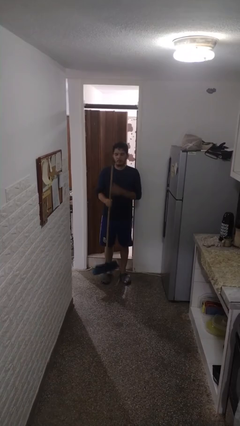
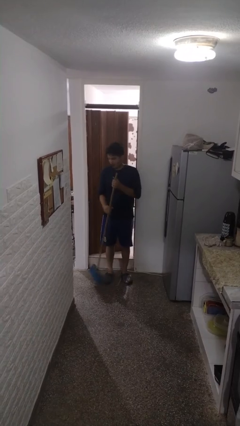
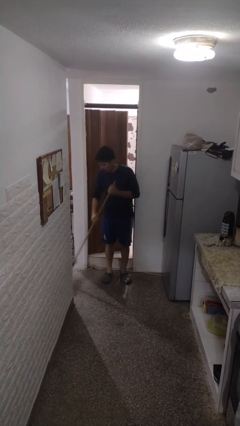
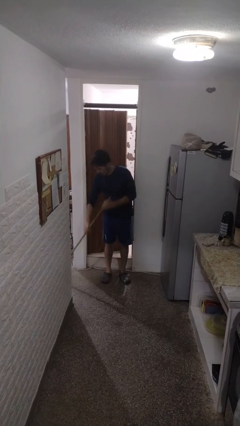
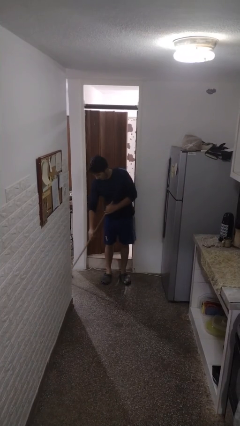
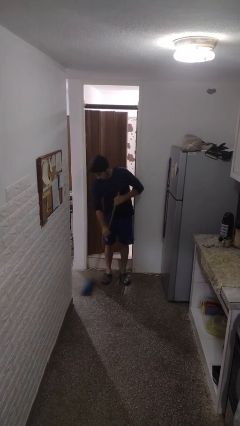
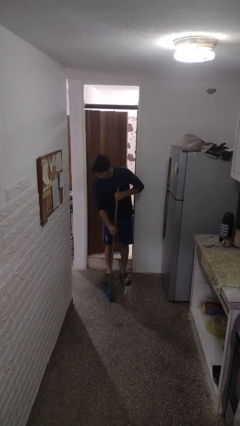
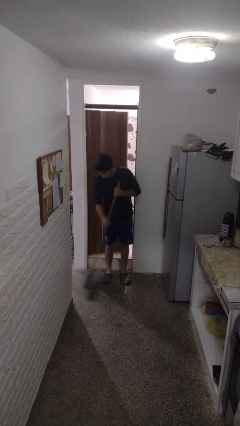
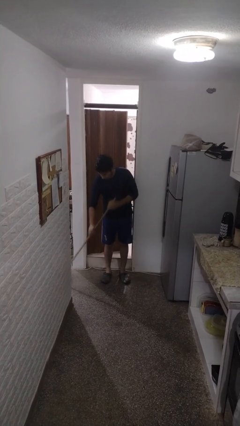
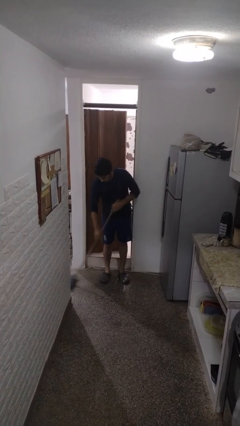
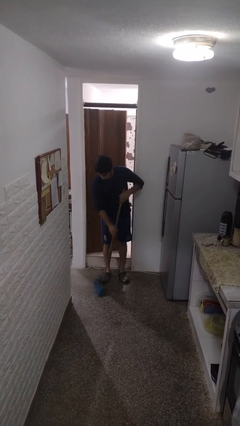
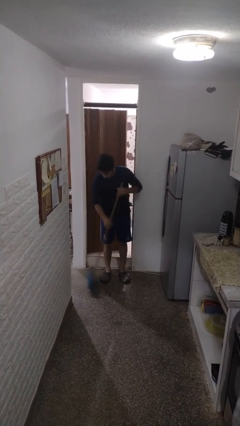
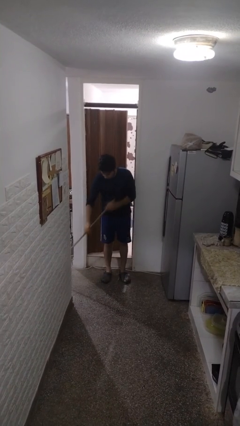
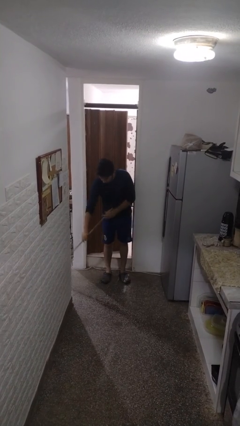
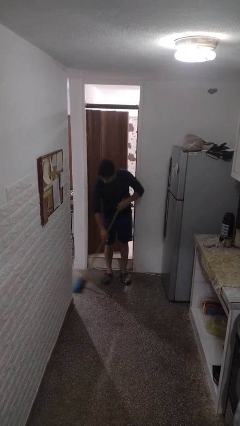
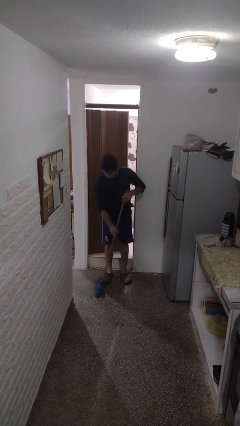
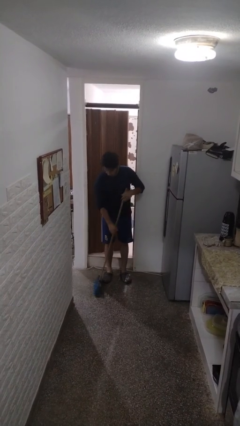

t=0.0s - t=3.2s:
person sweeps floor

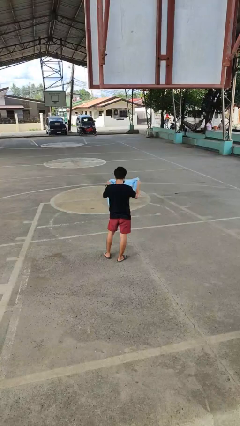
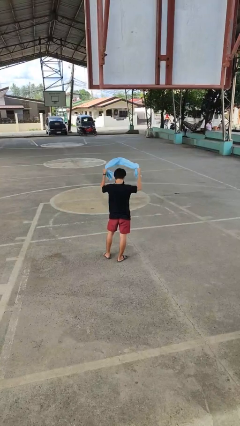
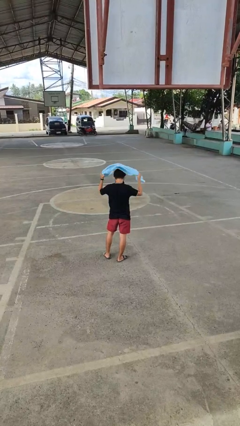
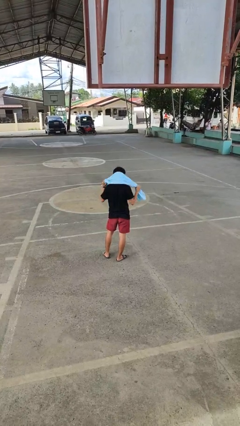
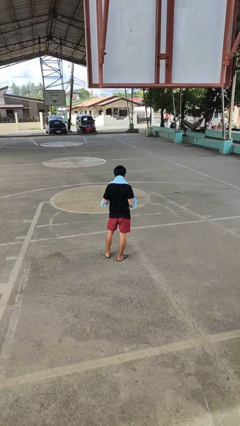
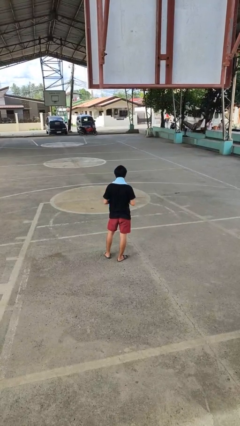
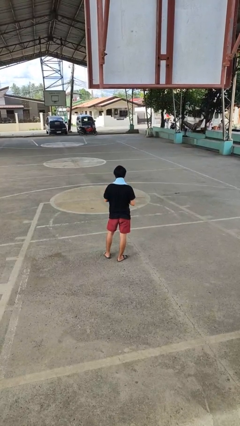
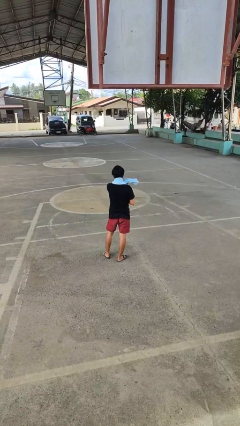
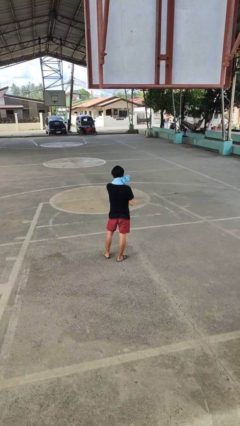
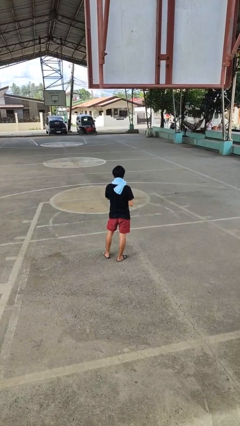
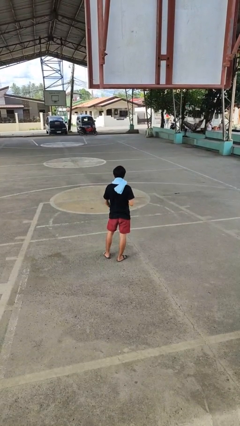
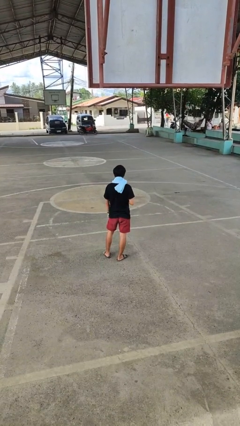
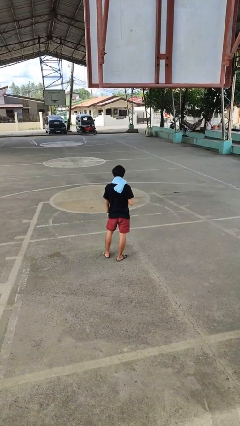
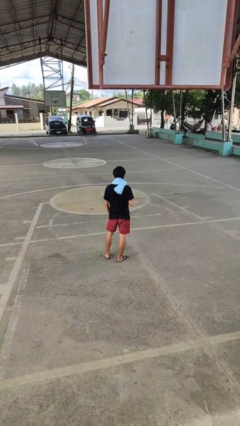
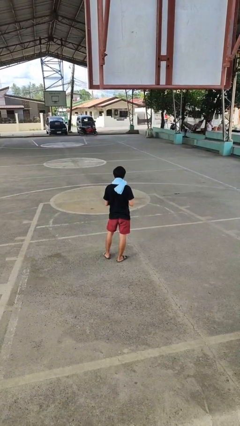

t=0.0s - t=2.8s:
person puts on scarf

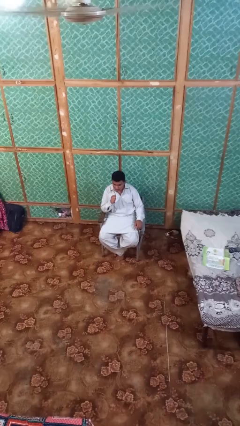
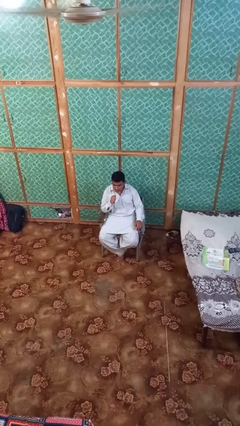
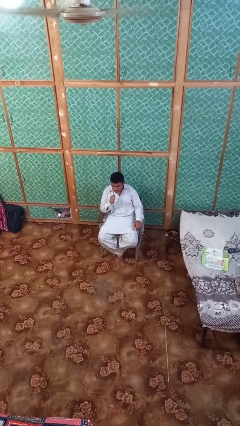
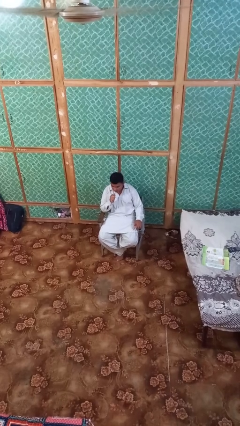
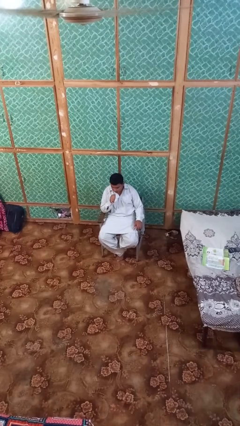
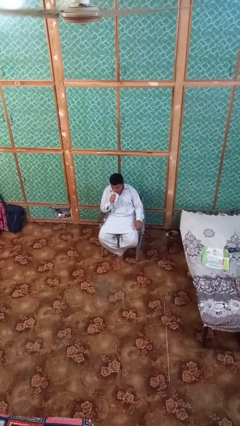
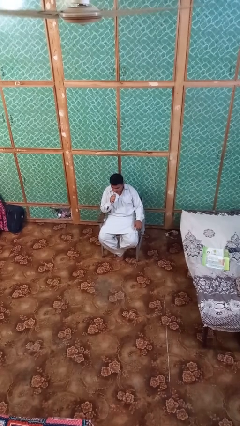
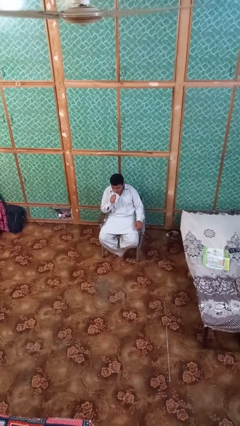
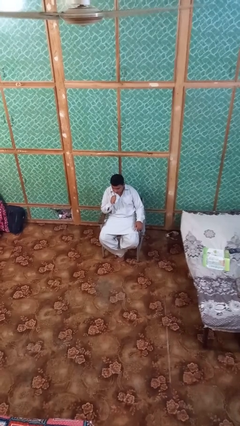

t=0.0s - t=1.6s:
person vapes

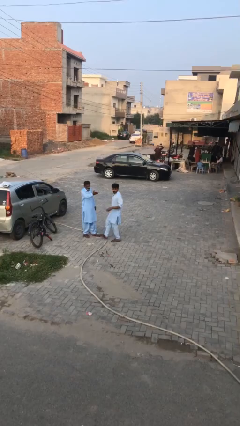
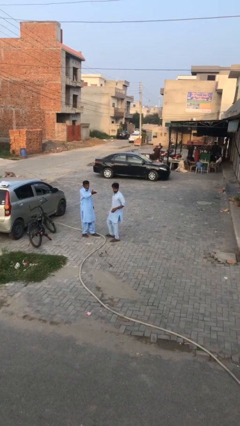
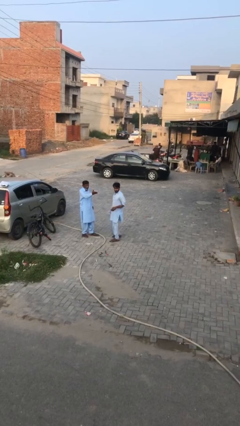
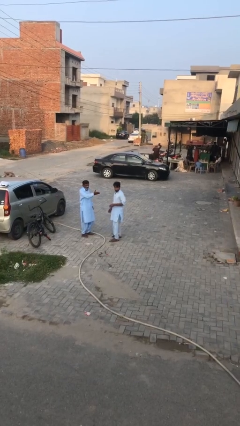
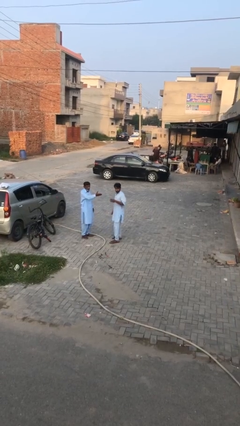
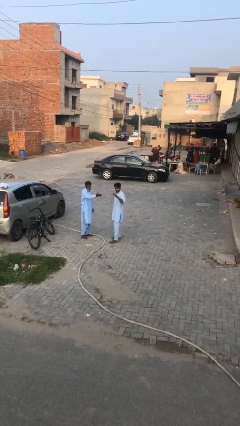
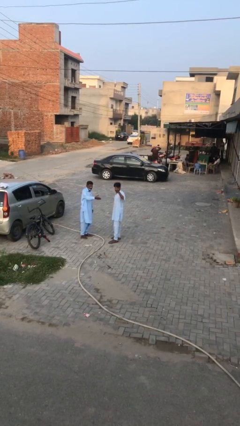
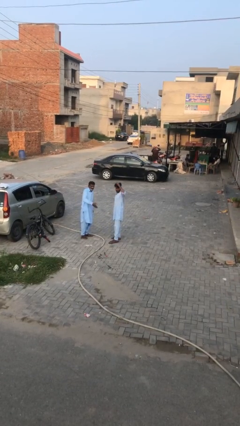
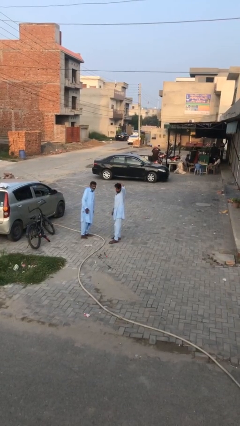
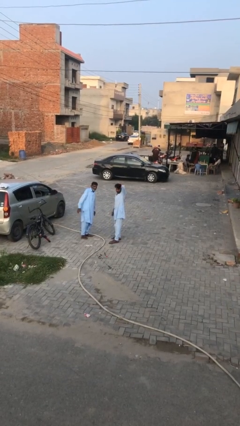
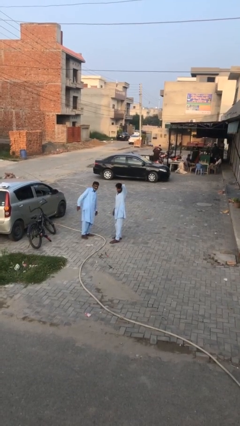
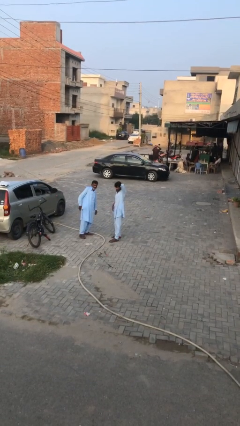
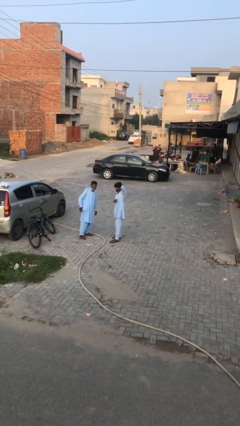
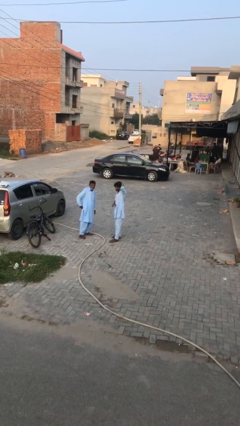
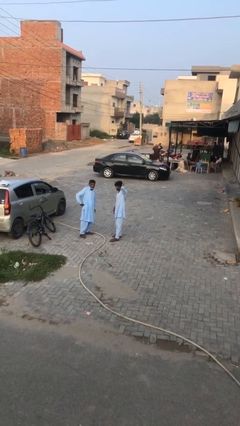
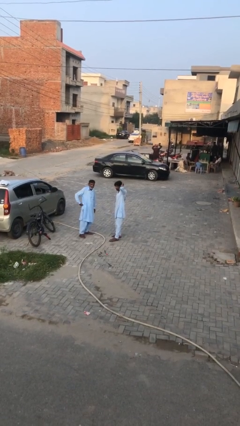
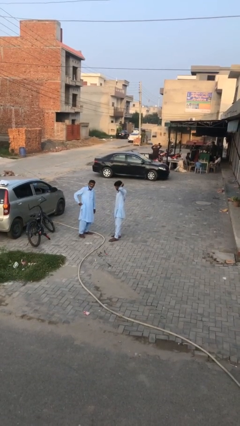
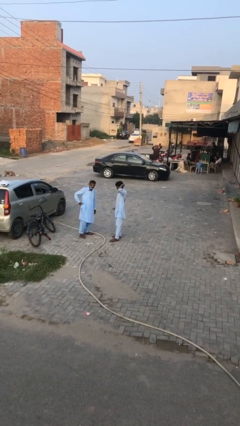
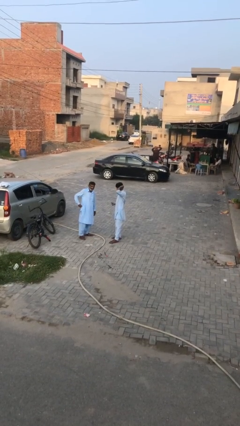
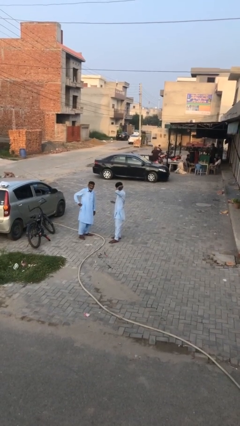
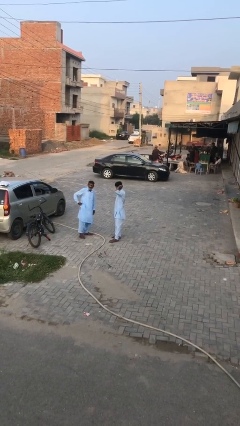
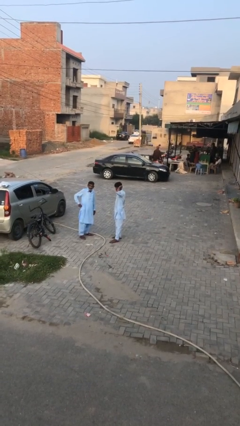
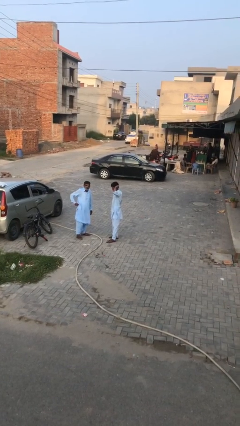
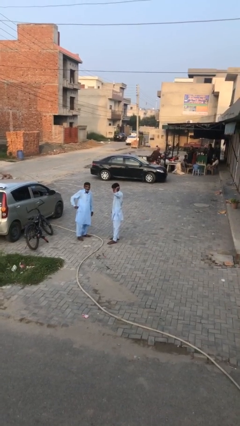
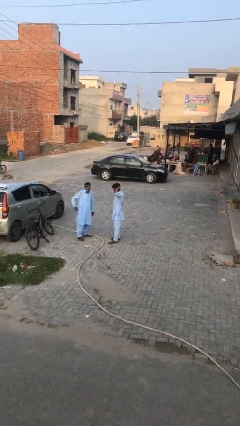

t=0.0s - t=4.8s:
person talks to person

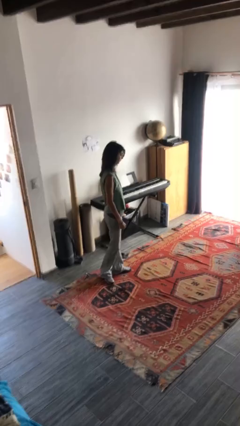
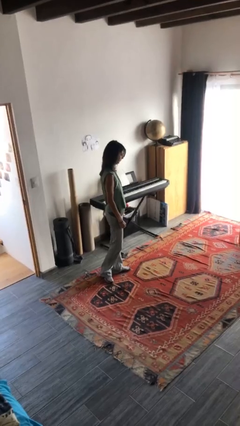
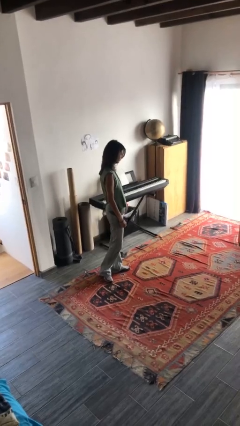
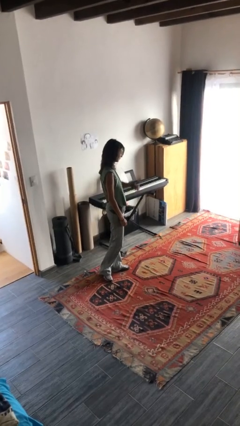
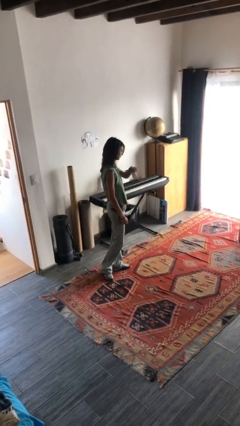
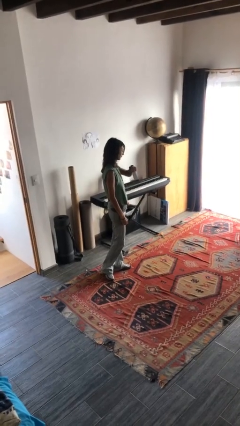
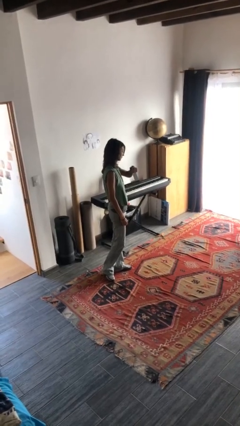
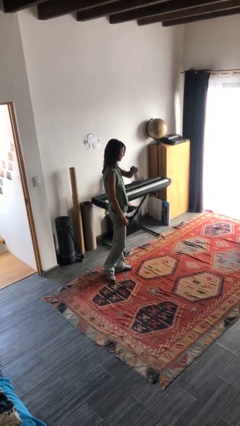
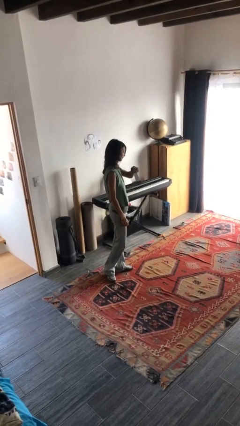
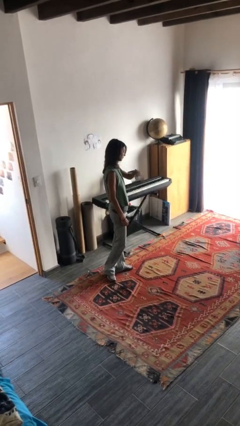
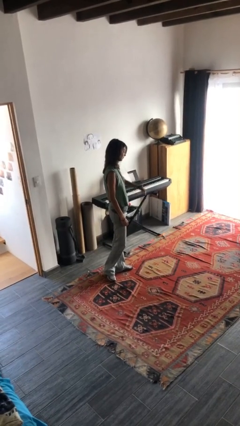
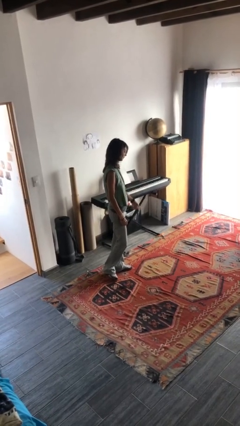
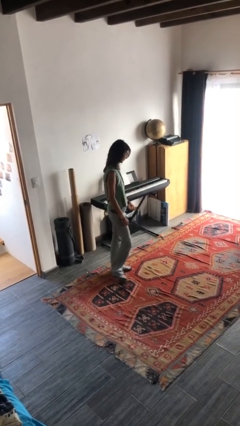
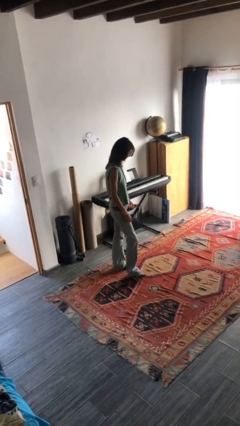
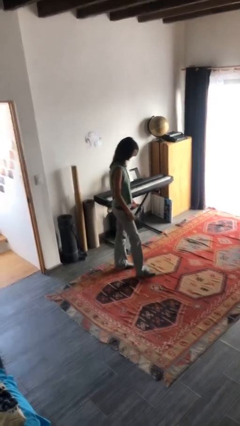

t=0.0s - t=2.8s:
person looks at wristwatch

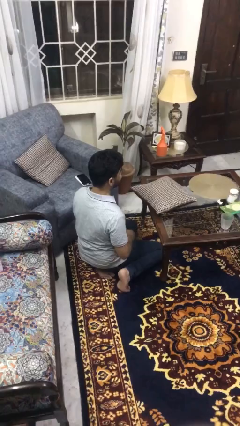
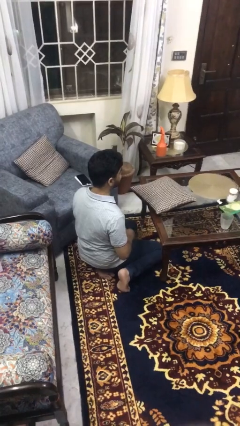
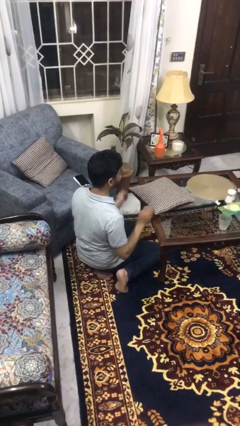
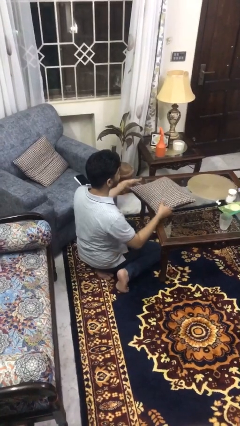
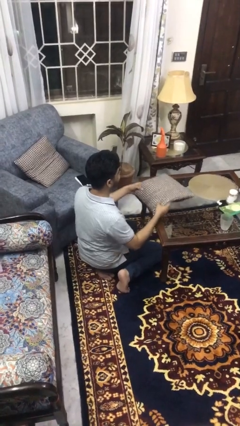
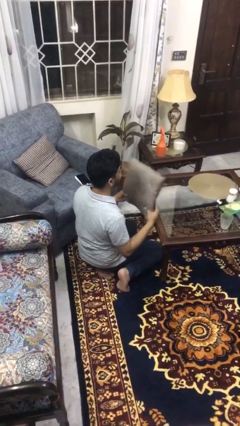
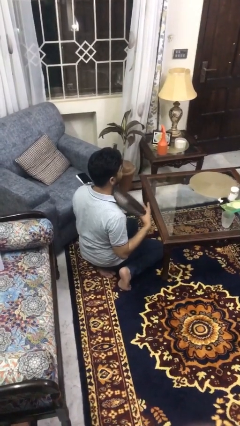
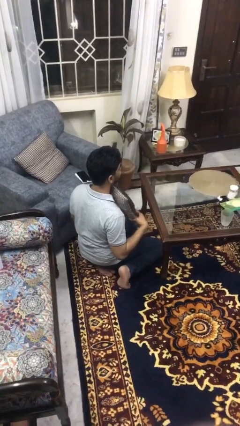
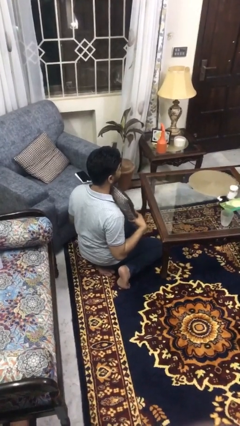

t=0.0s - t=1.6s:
person picks up object from table

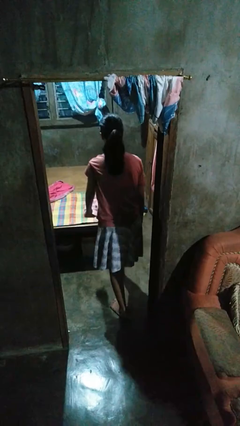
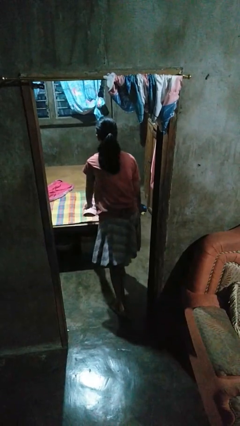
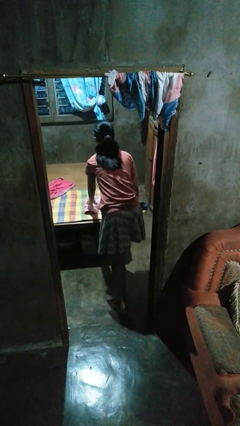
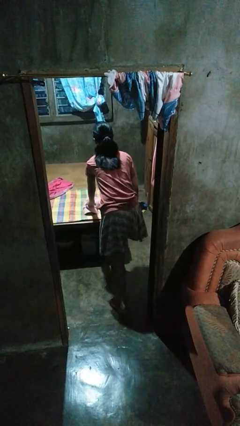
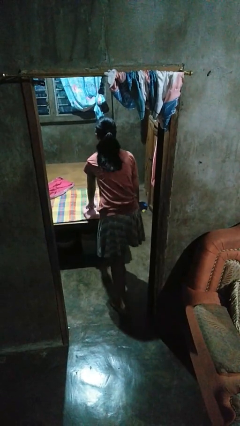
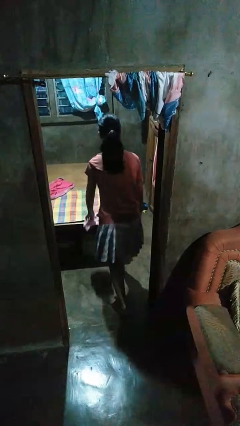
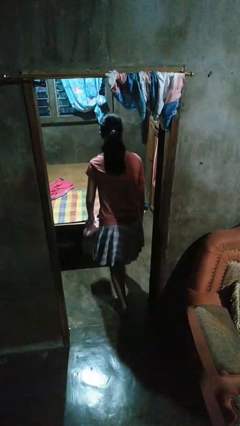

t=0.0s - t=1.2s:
person picks up object from bed
